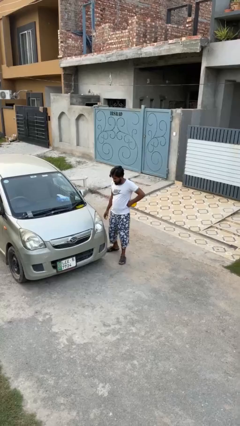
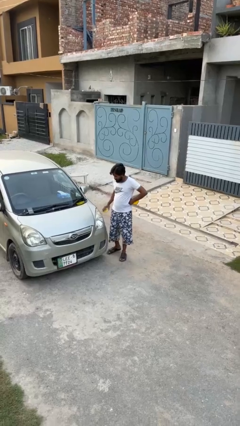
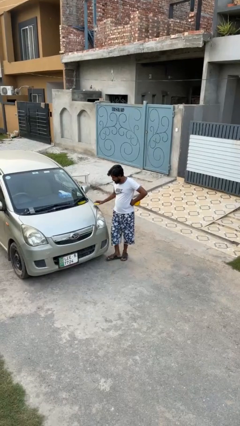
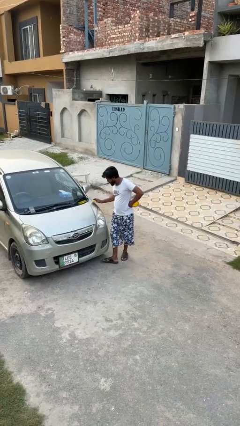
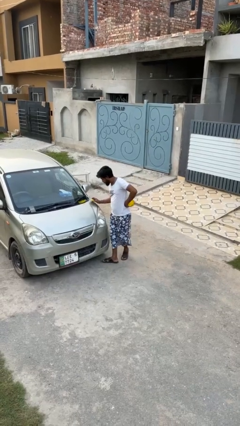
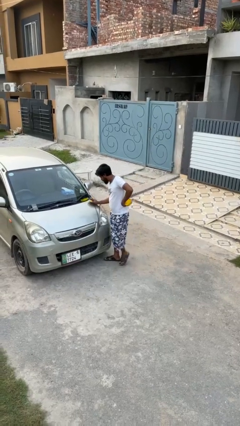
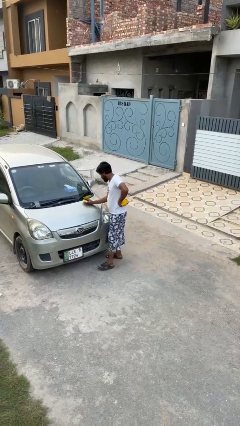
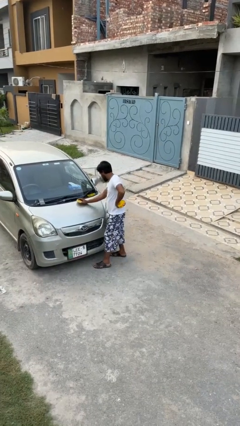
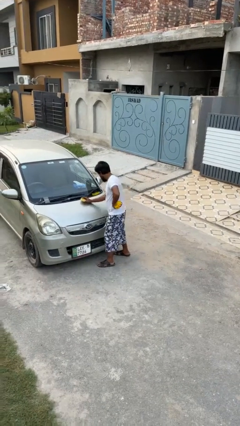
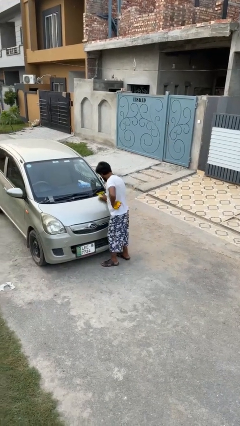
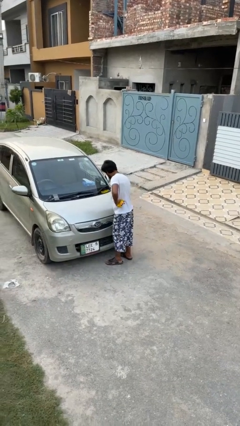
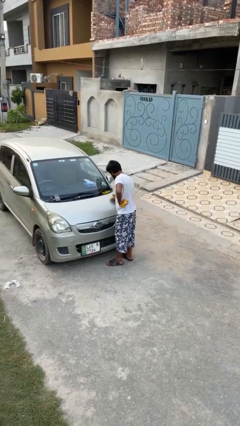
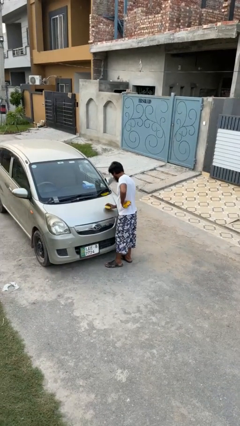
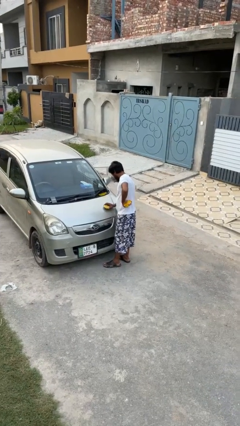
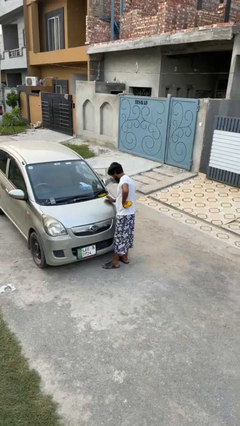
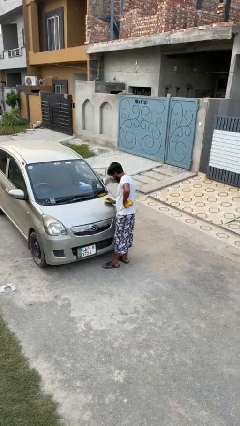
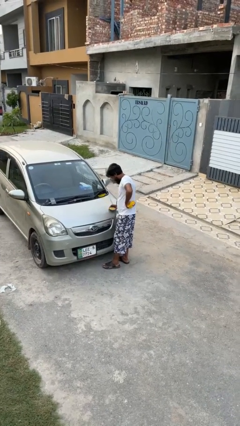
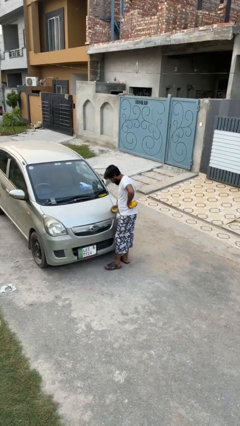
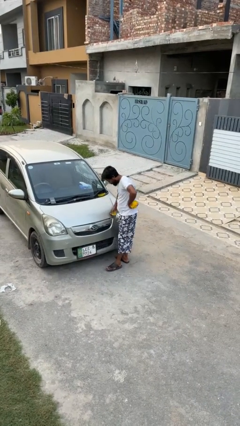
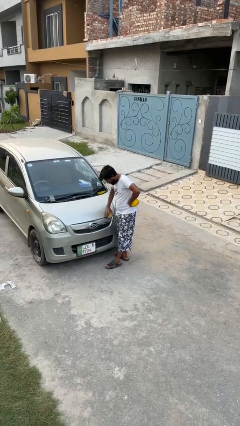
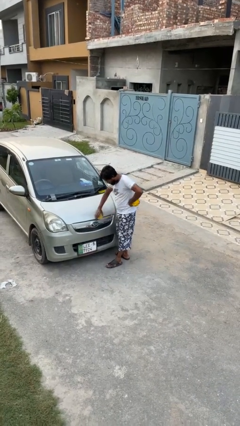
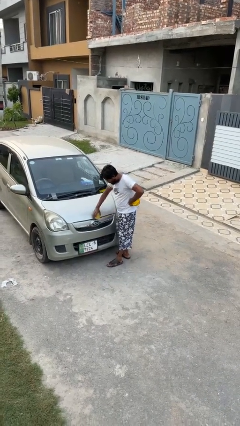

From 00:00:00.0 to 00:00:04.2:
person polishes car with rag

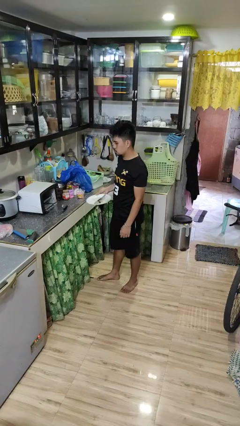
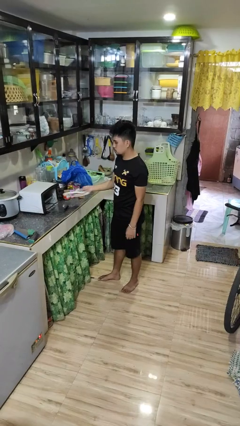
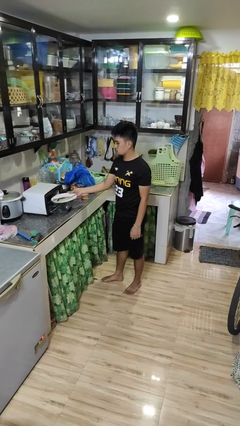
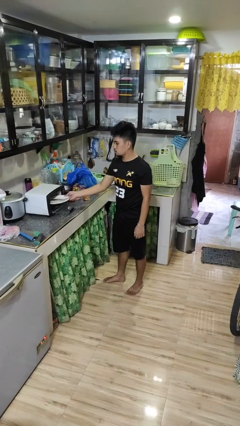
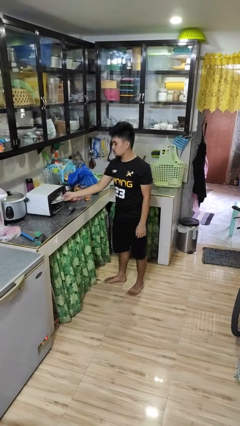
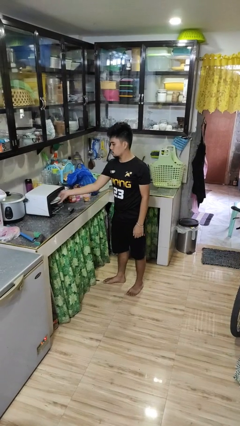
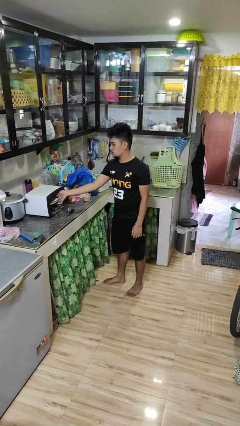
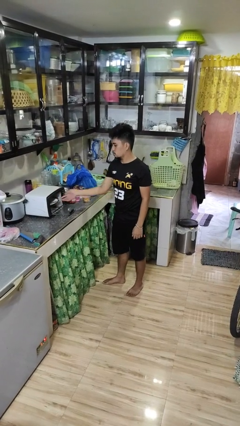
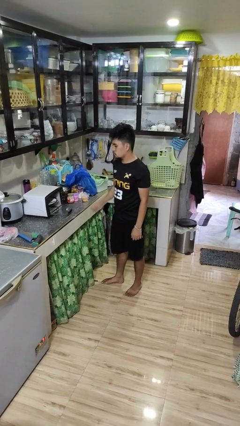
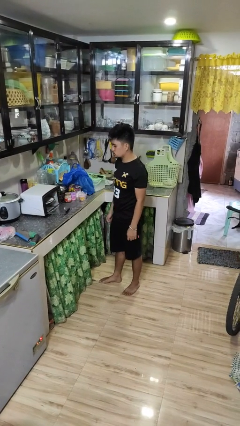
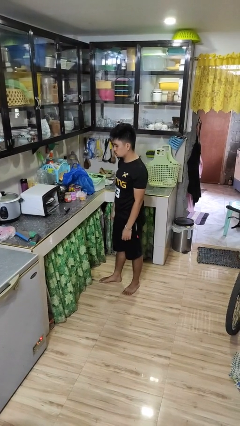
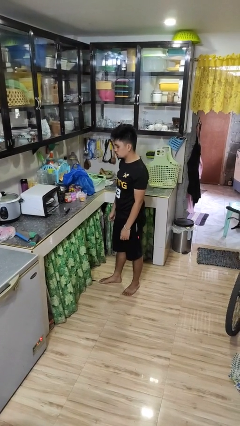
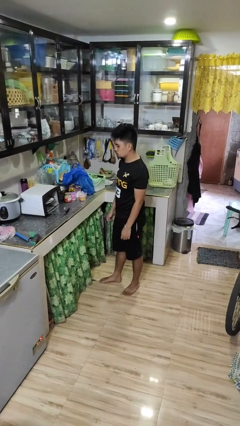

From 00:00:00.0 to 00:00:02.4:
person puts object into microwave

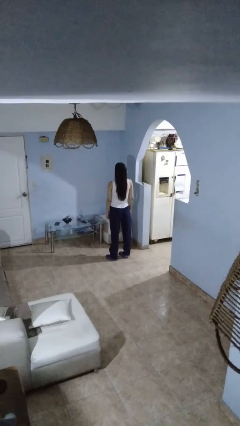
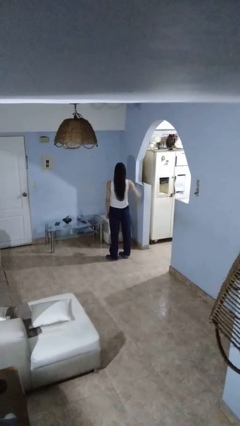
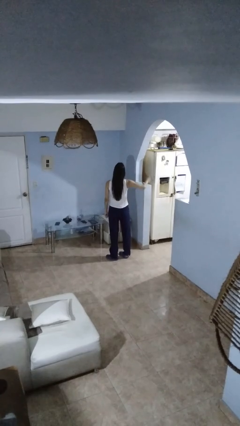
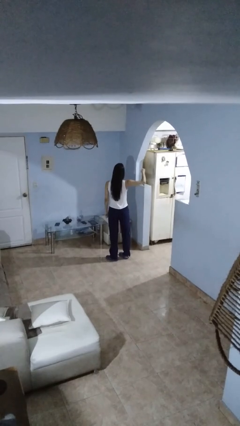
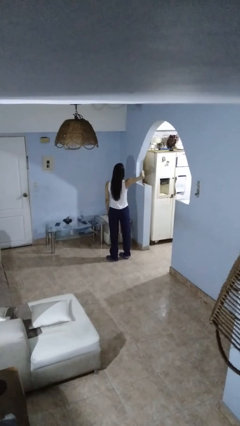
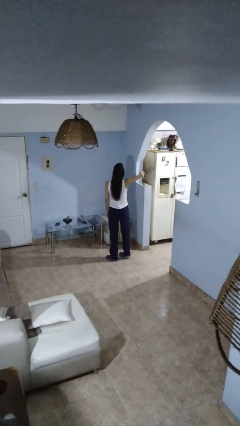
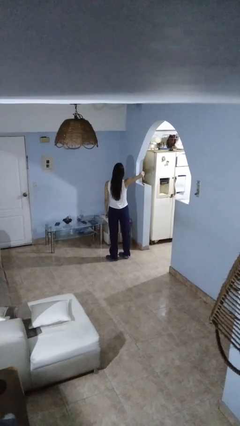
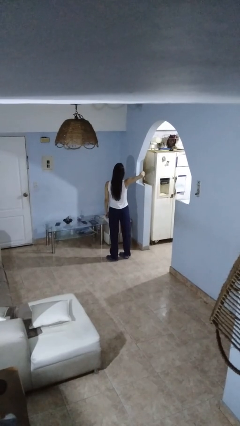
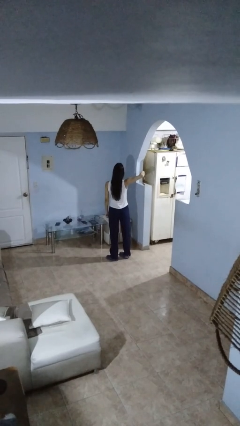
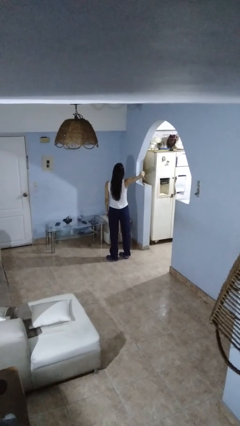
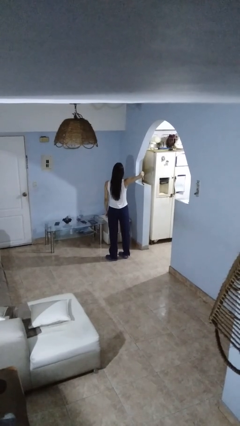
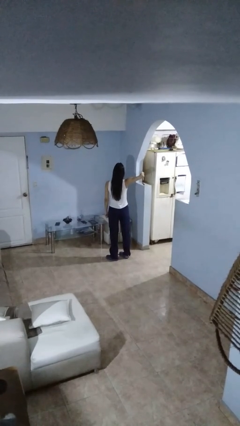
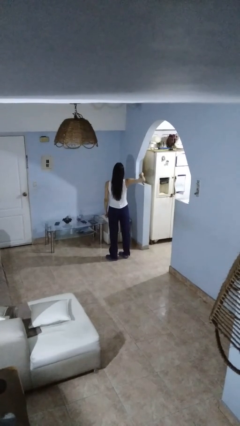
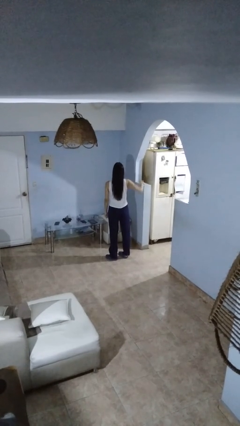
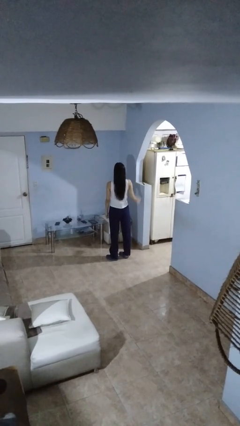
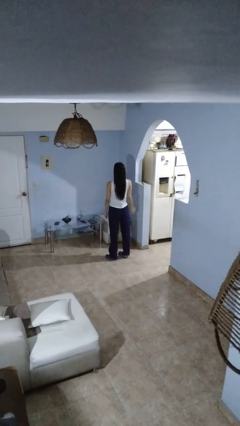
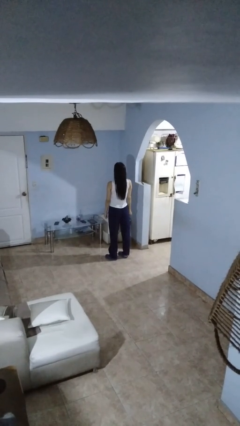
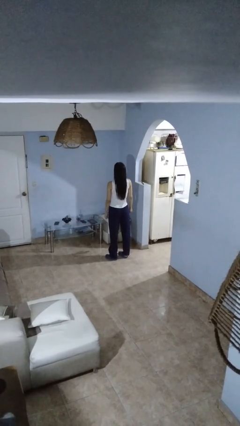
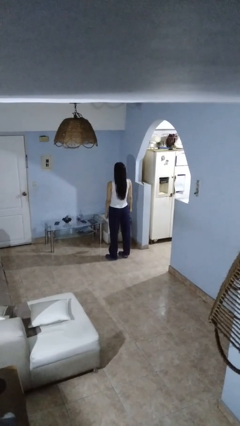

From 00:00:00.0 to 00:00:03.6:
person gestures thumbs down

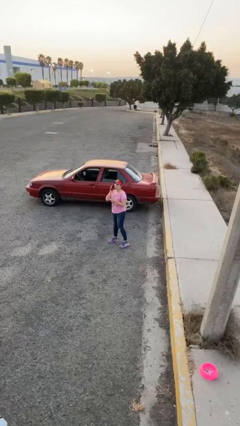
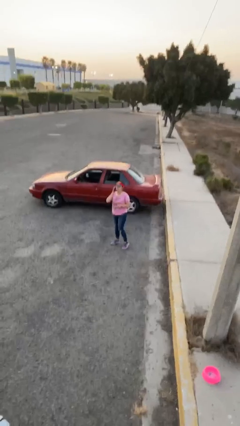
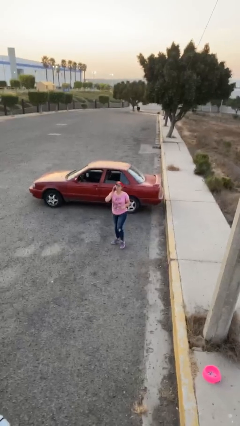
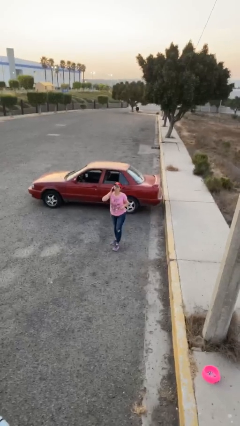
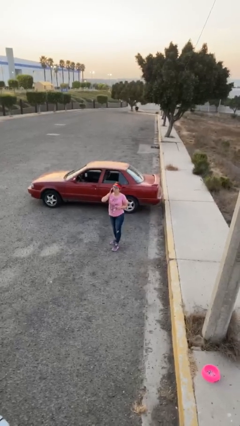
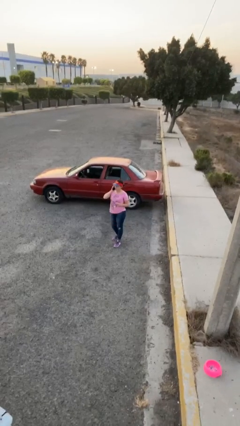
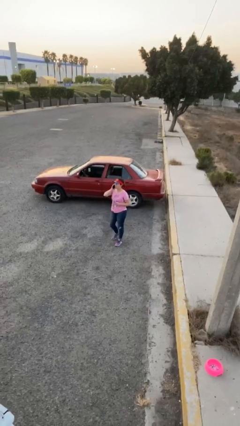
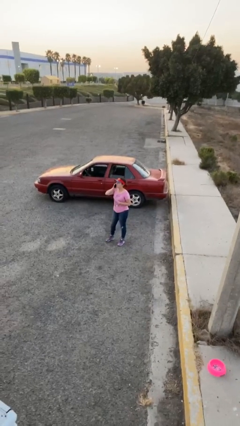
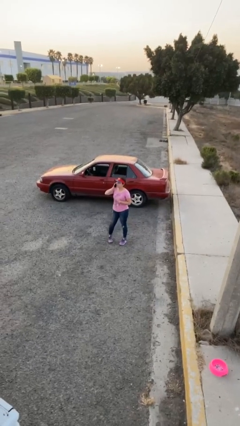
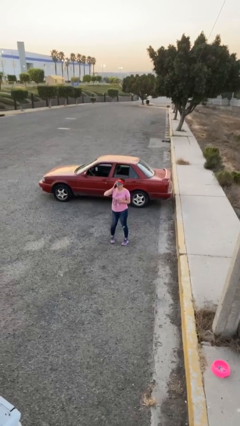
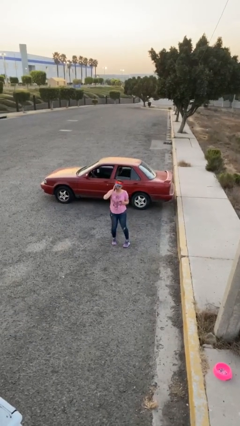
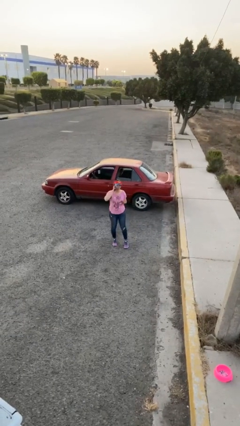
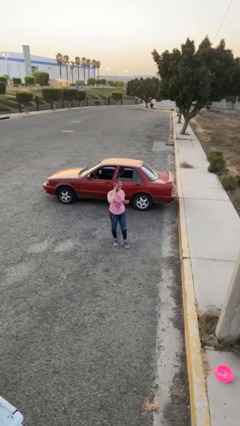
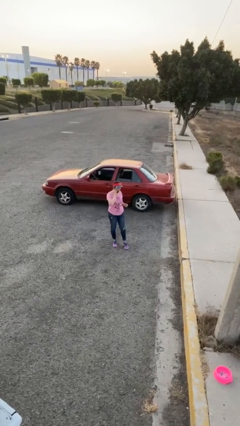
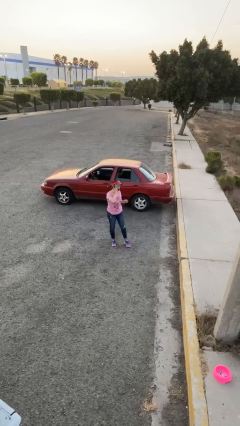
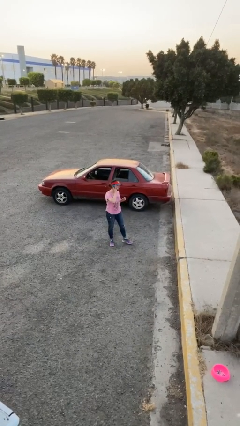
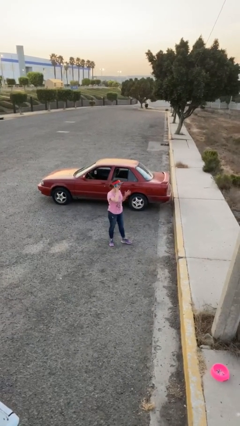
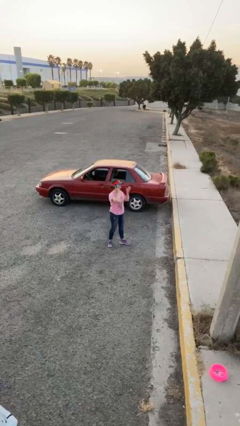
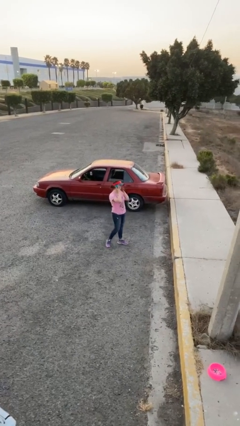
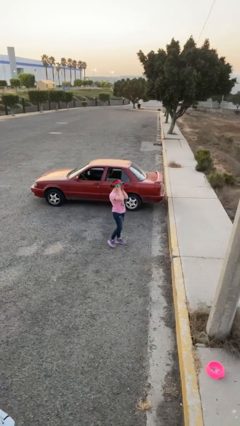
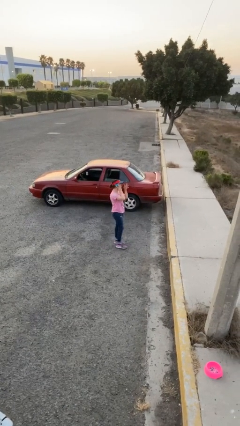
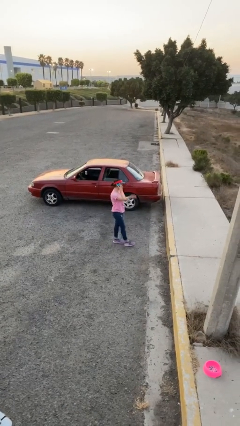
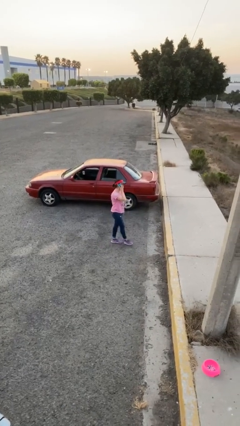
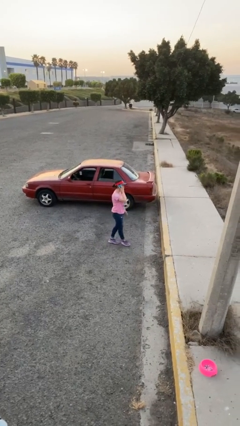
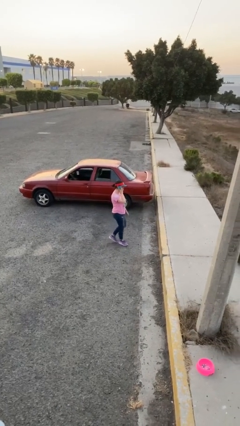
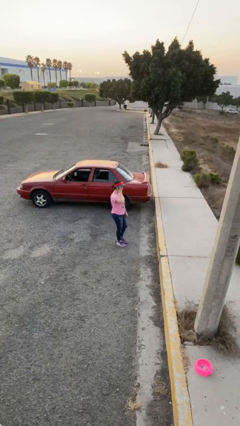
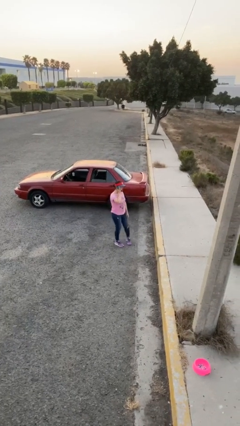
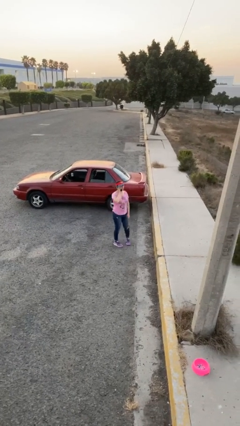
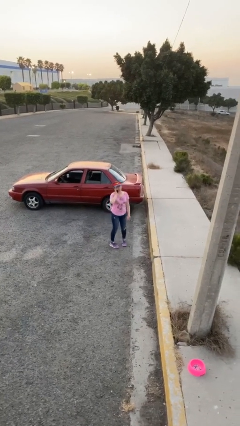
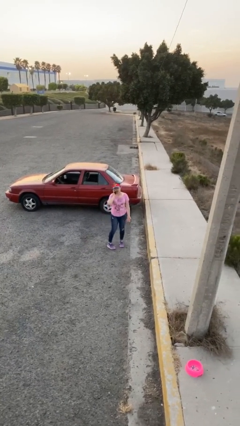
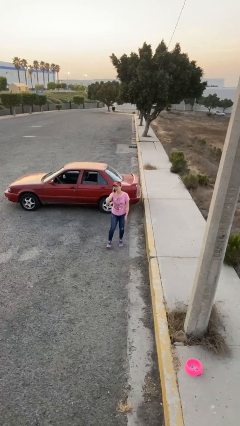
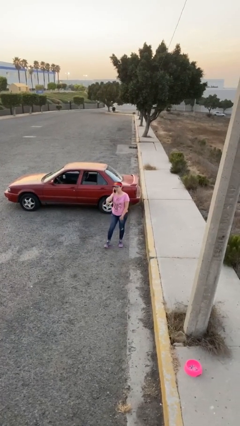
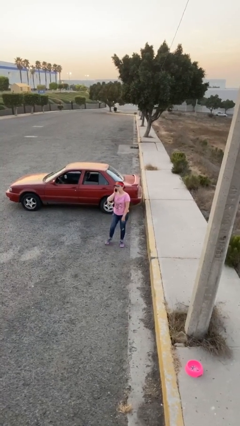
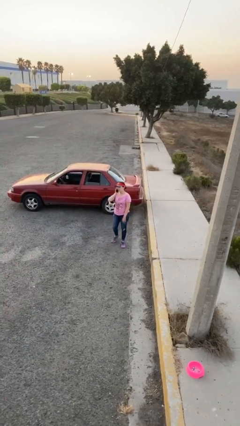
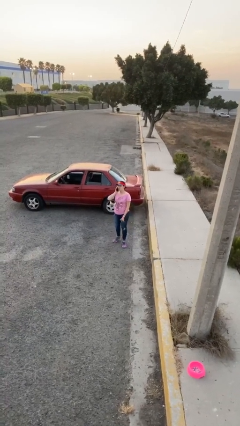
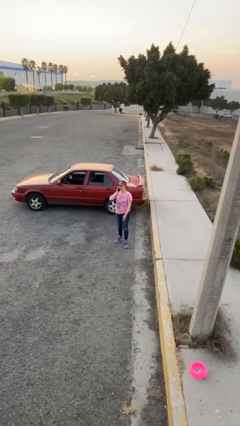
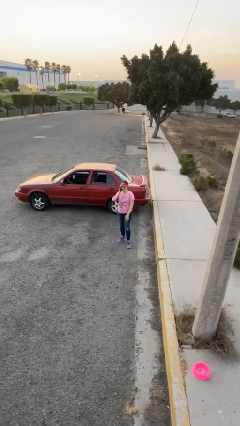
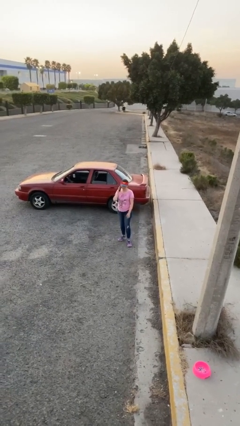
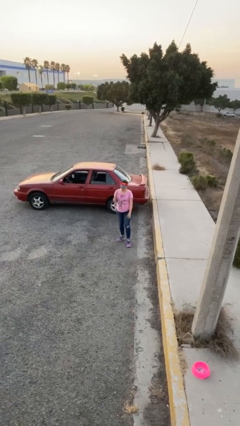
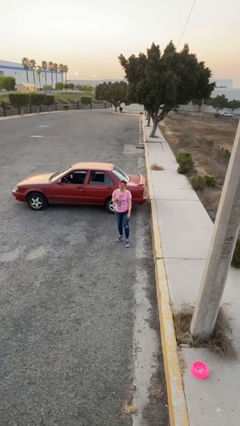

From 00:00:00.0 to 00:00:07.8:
person talks on phone
